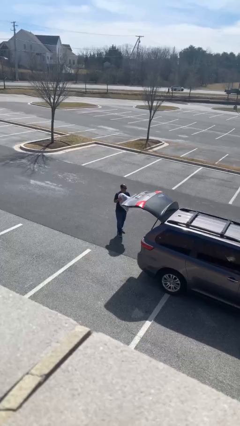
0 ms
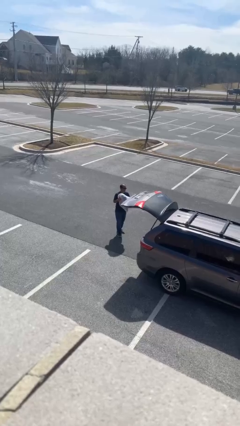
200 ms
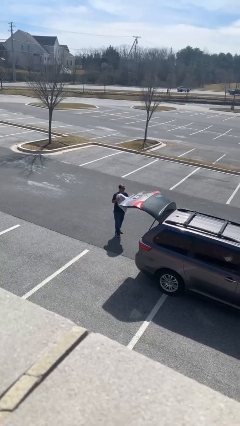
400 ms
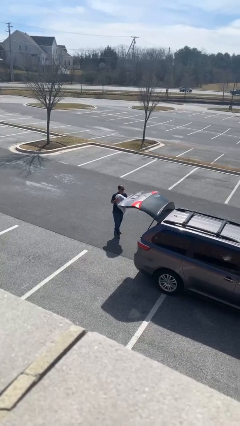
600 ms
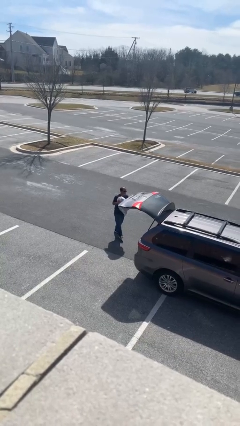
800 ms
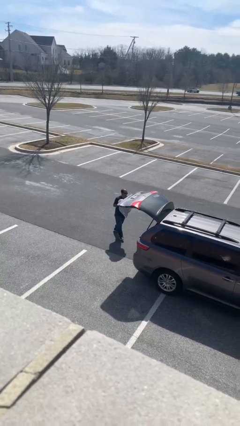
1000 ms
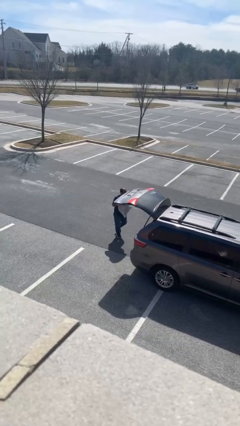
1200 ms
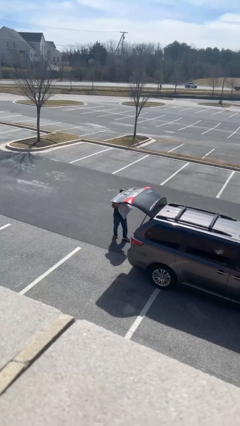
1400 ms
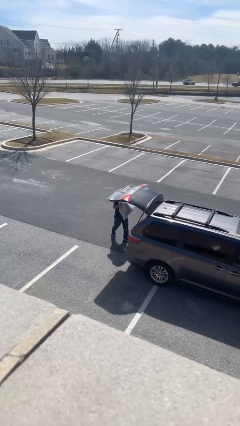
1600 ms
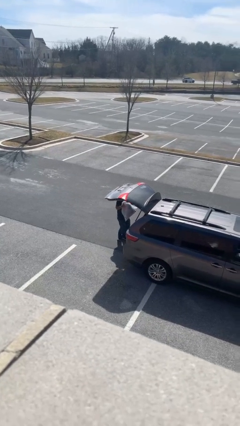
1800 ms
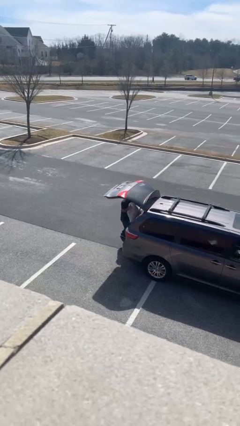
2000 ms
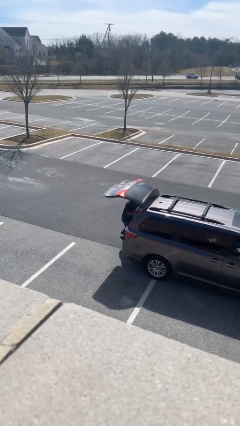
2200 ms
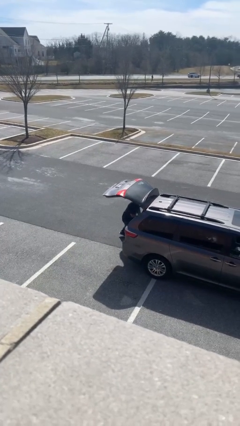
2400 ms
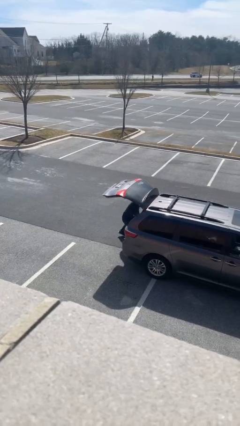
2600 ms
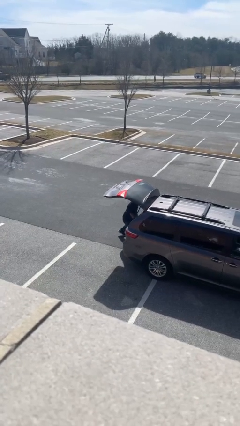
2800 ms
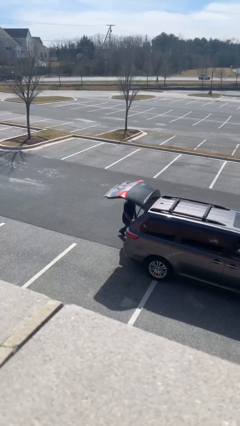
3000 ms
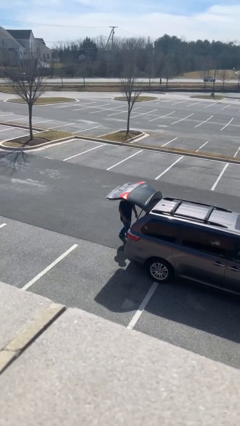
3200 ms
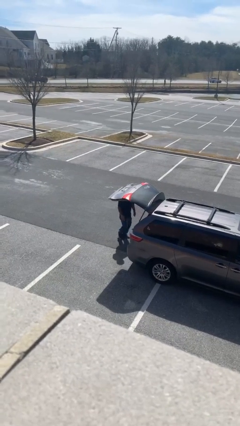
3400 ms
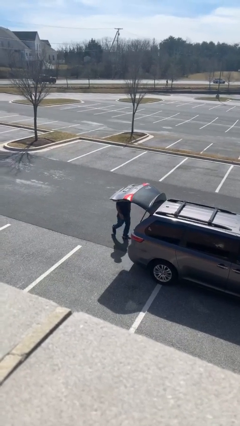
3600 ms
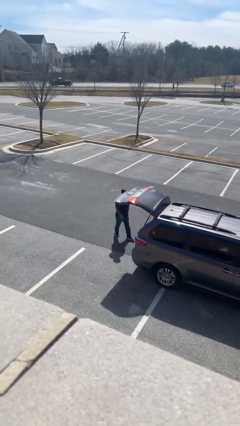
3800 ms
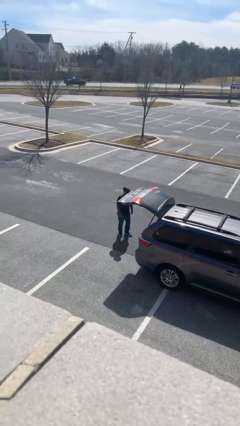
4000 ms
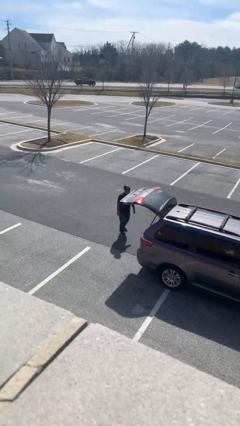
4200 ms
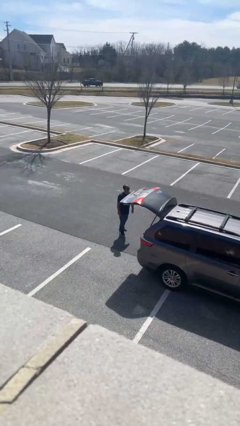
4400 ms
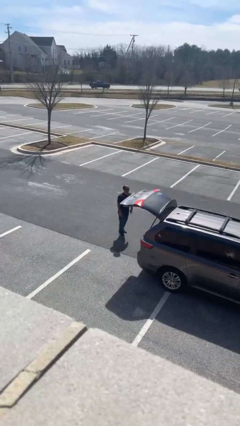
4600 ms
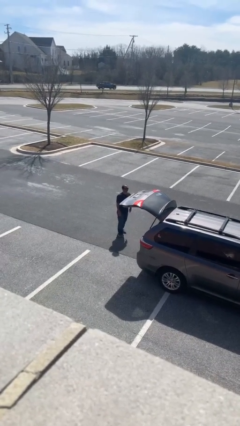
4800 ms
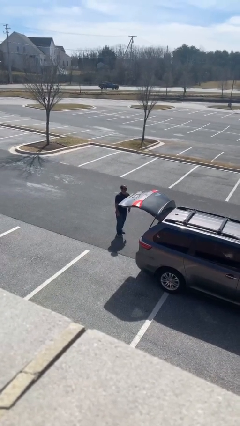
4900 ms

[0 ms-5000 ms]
person loads car

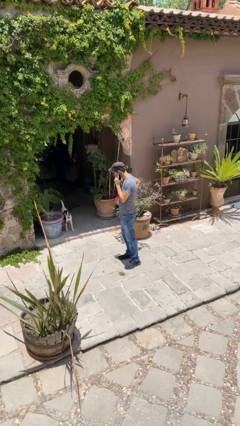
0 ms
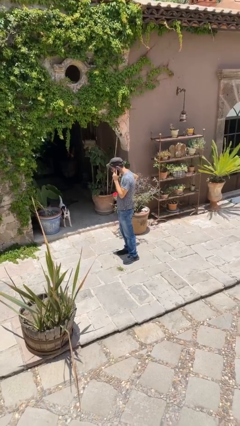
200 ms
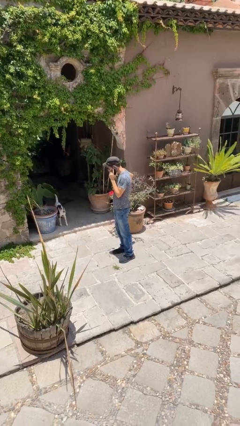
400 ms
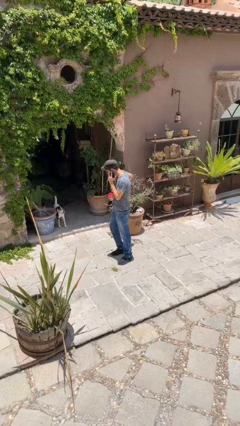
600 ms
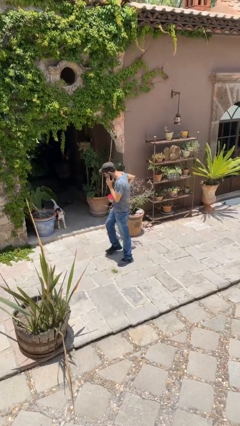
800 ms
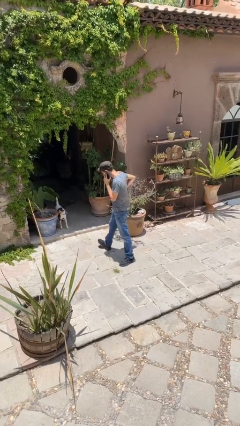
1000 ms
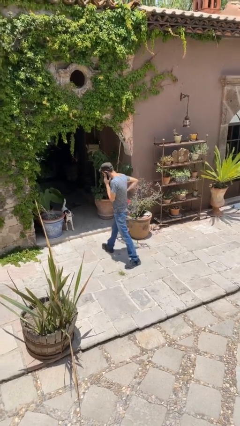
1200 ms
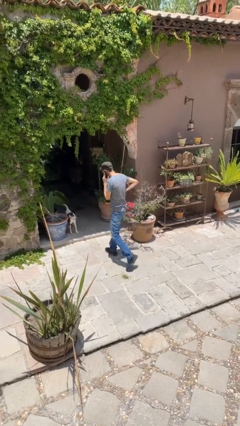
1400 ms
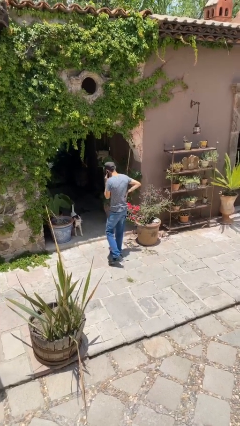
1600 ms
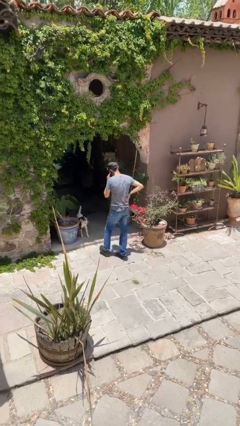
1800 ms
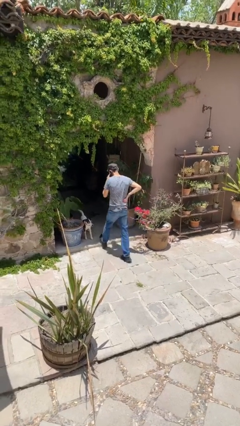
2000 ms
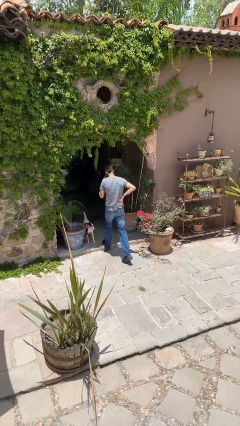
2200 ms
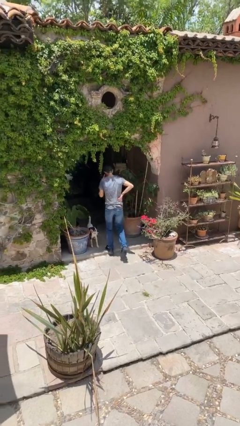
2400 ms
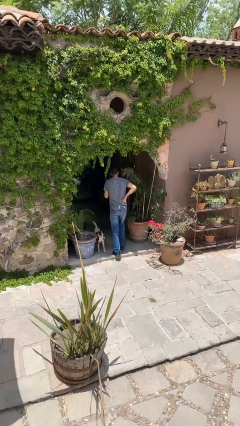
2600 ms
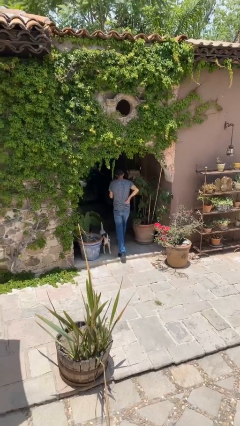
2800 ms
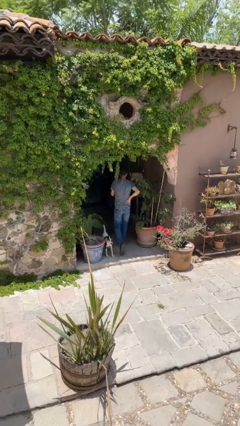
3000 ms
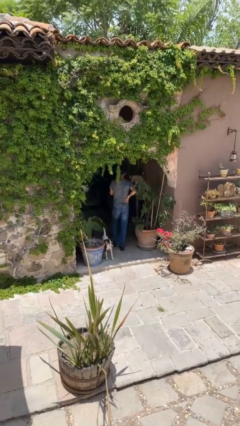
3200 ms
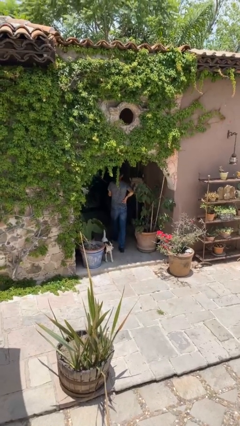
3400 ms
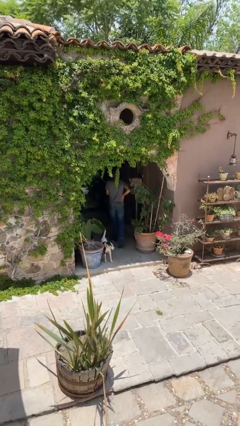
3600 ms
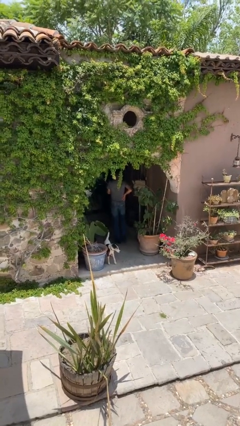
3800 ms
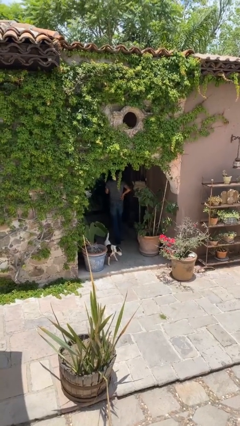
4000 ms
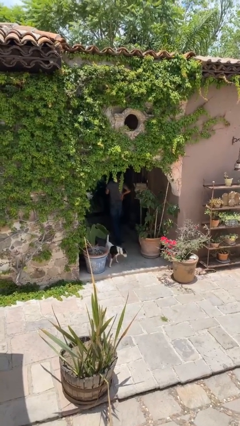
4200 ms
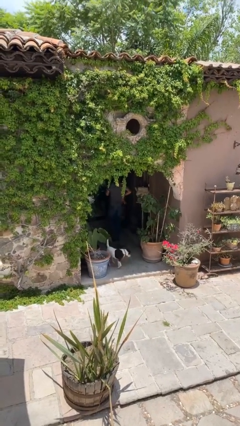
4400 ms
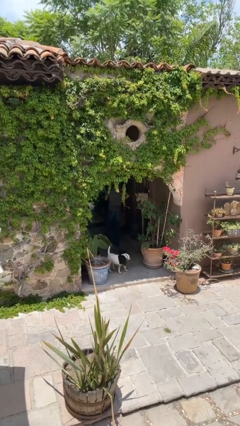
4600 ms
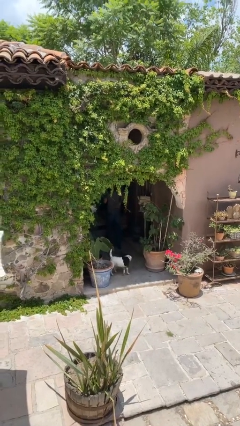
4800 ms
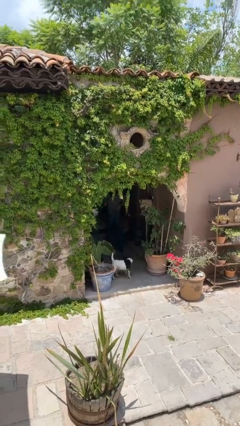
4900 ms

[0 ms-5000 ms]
person exits scene through structure

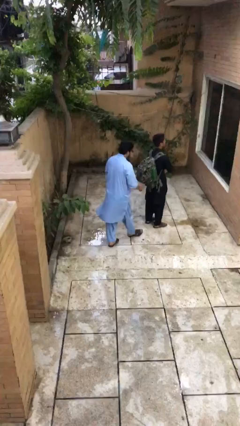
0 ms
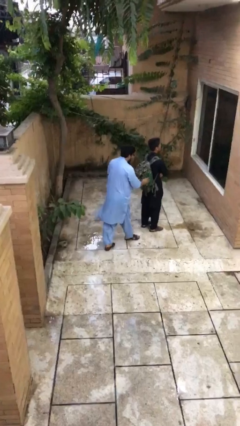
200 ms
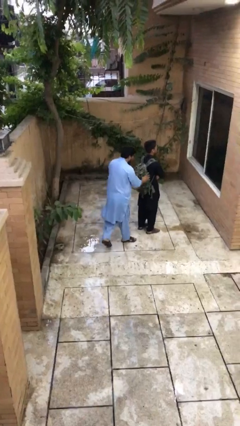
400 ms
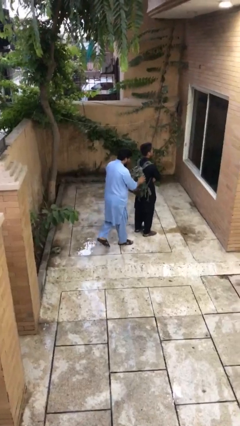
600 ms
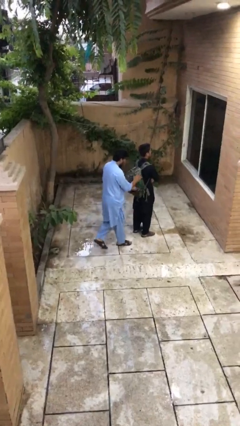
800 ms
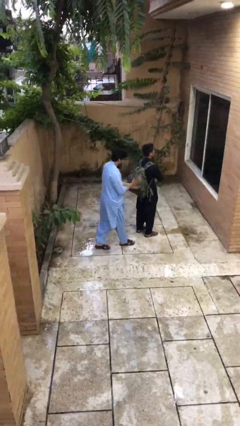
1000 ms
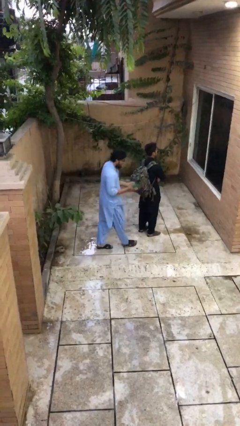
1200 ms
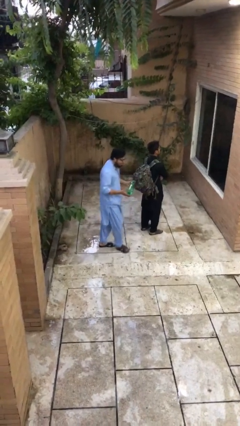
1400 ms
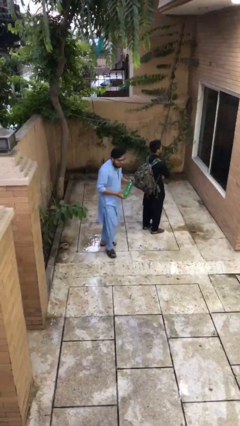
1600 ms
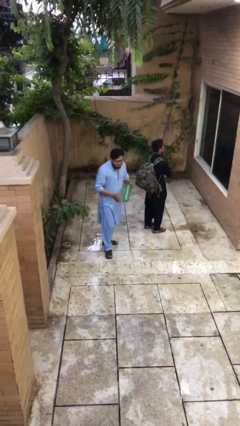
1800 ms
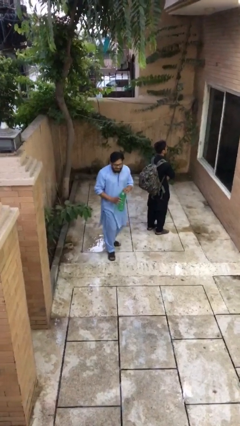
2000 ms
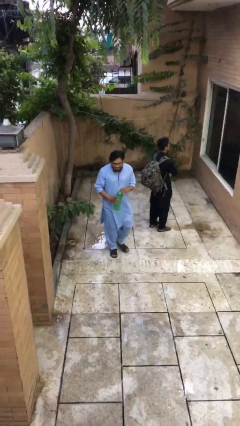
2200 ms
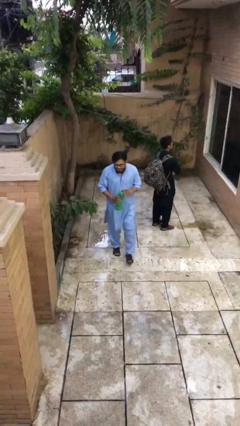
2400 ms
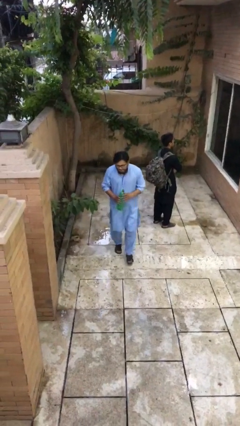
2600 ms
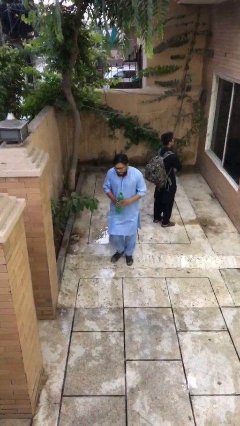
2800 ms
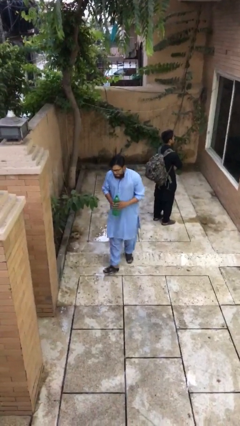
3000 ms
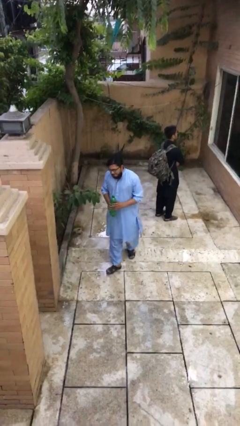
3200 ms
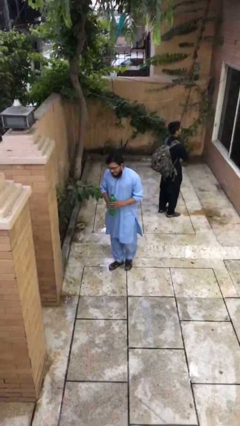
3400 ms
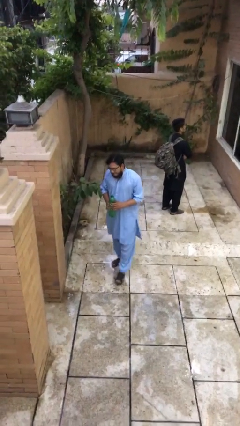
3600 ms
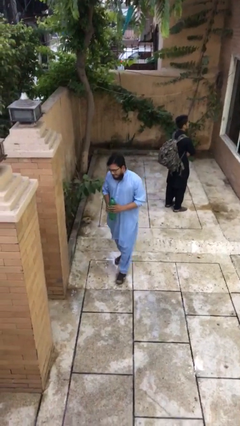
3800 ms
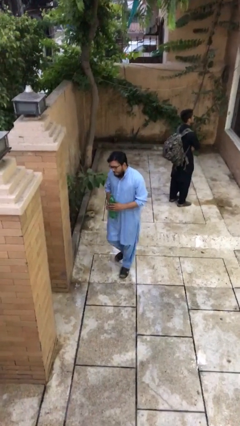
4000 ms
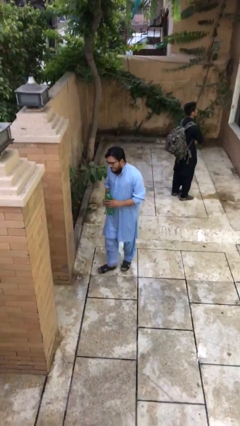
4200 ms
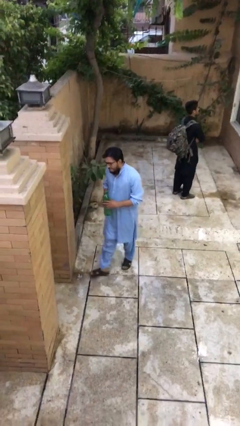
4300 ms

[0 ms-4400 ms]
person steals object from person

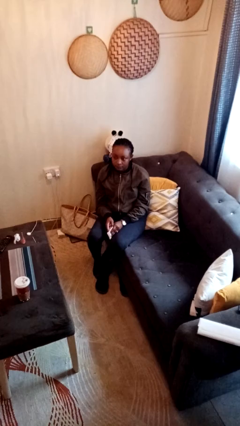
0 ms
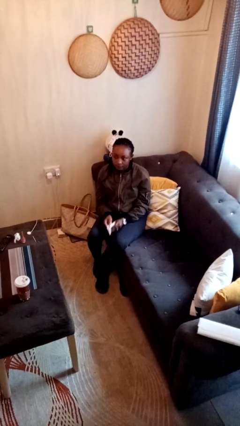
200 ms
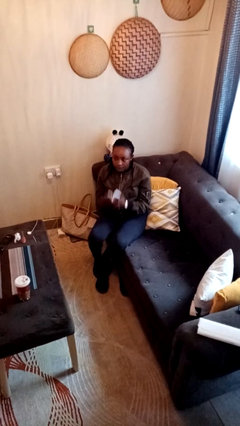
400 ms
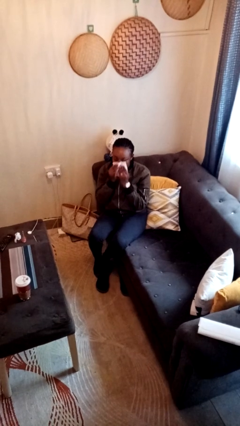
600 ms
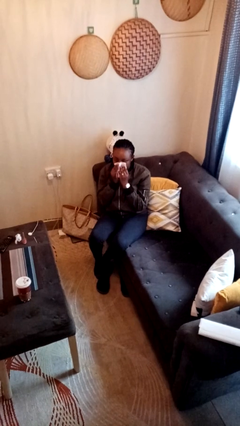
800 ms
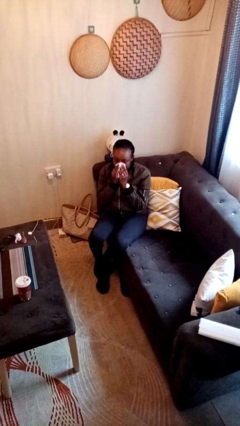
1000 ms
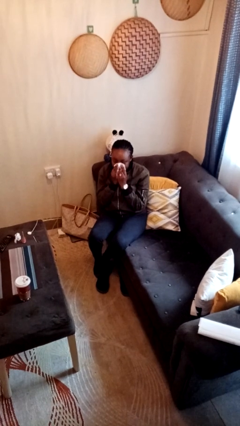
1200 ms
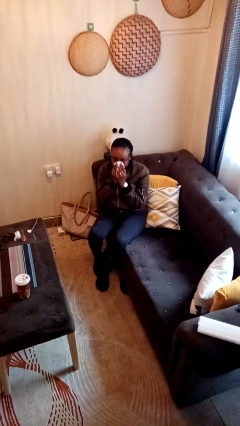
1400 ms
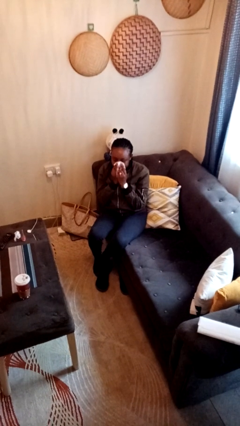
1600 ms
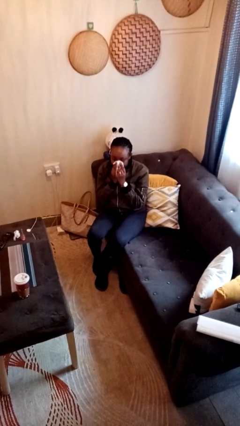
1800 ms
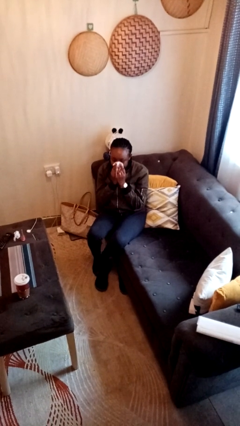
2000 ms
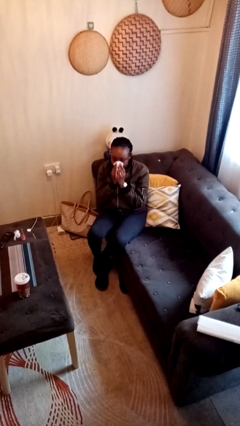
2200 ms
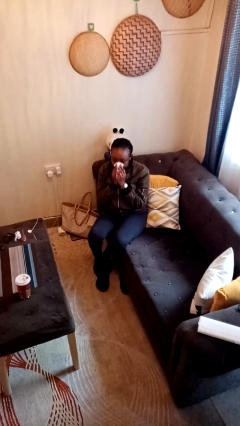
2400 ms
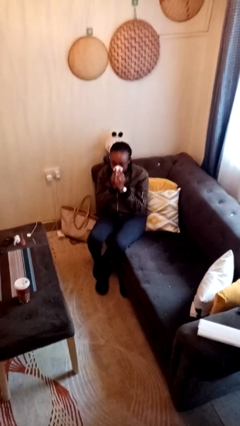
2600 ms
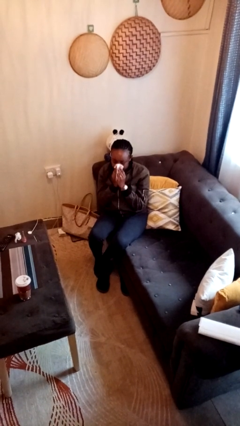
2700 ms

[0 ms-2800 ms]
person blows nose

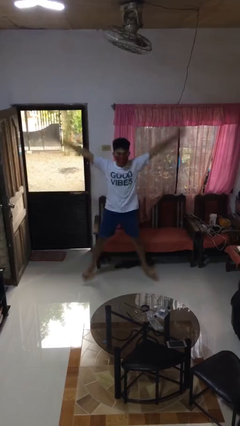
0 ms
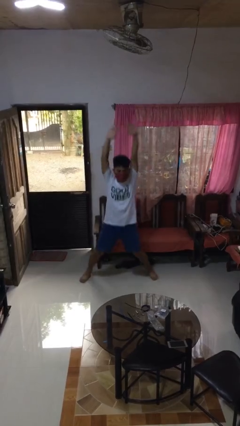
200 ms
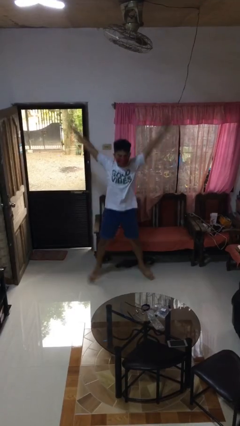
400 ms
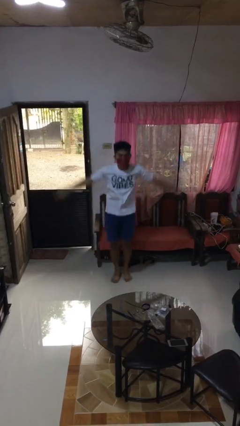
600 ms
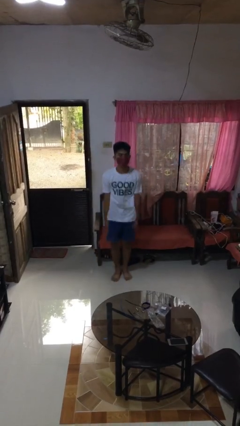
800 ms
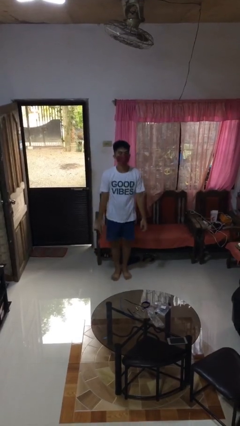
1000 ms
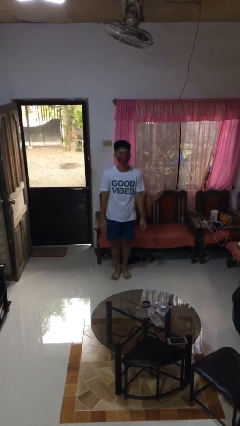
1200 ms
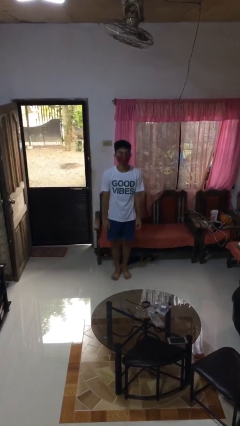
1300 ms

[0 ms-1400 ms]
person exercises with jumping jacks
